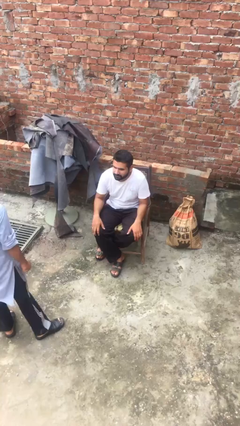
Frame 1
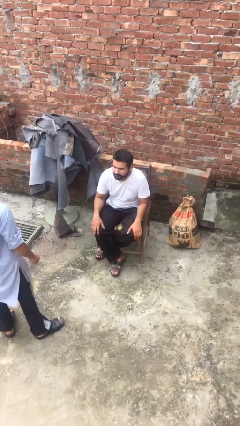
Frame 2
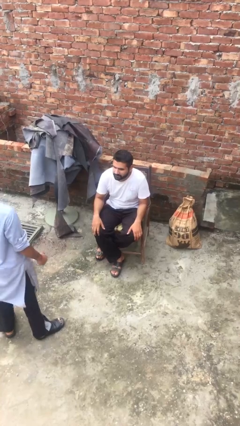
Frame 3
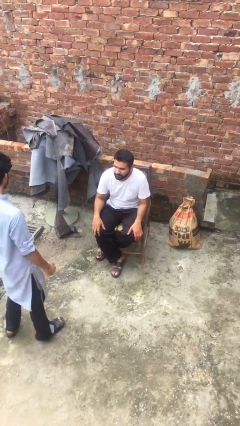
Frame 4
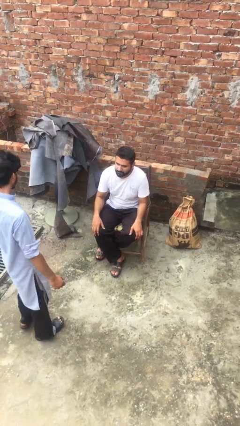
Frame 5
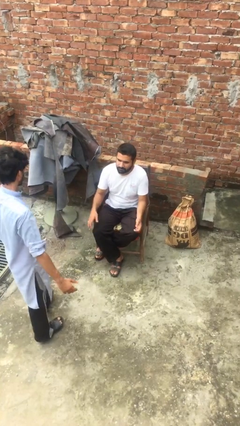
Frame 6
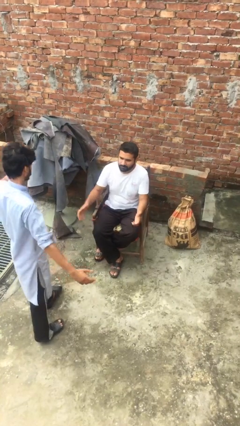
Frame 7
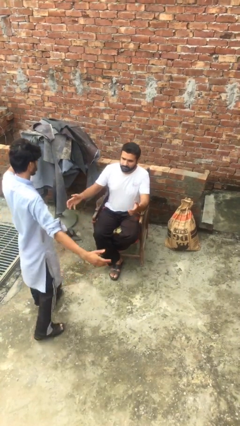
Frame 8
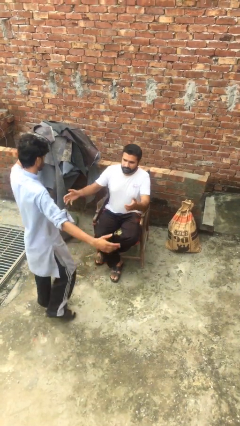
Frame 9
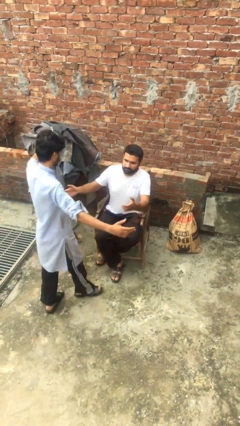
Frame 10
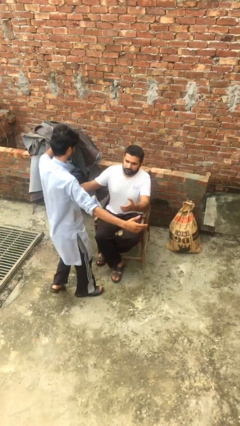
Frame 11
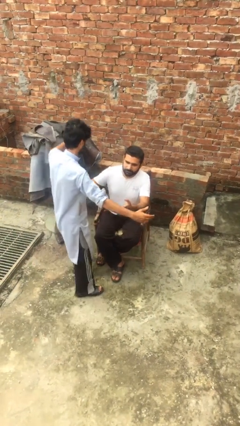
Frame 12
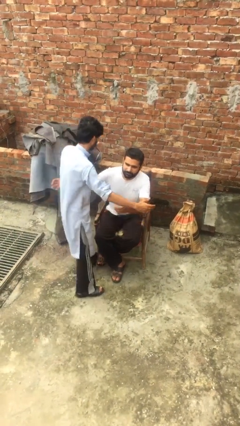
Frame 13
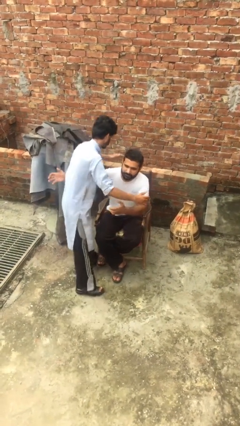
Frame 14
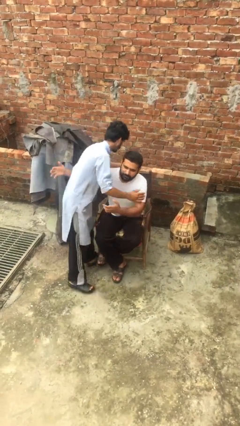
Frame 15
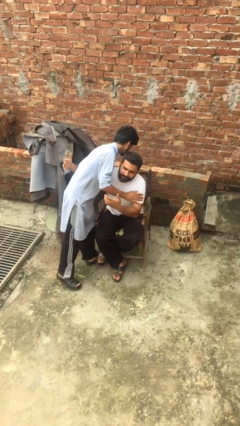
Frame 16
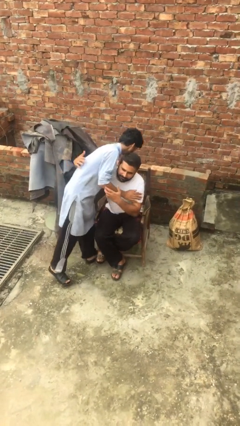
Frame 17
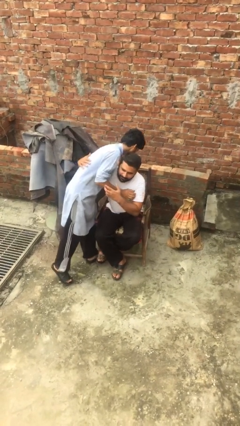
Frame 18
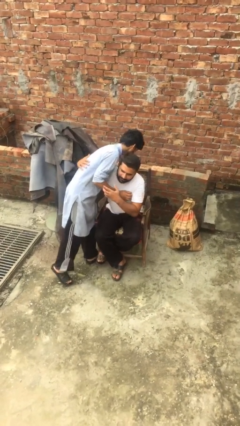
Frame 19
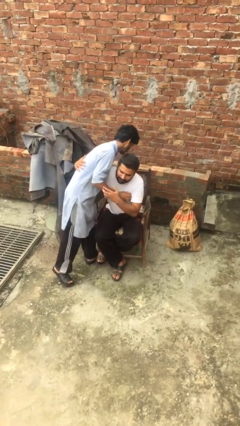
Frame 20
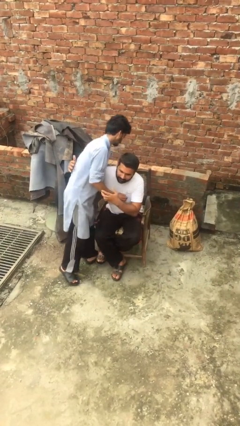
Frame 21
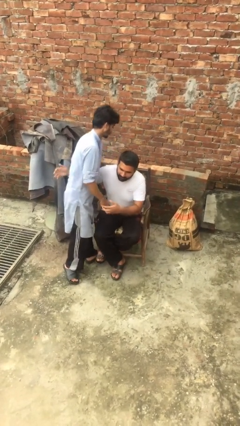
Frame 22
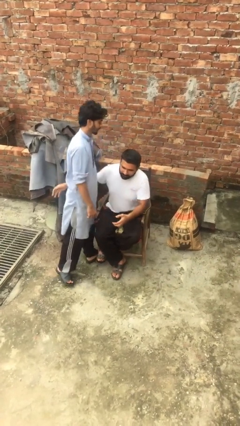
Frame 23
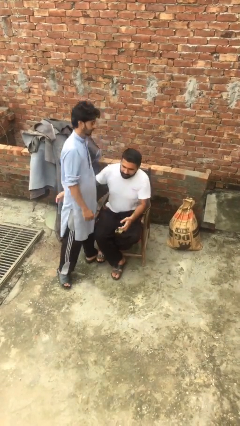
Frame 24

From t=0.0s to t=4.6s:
person embraces person

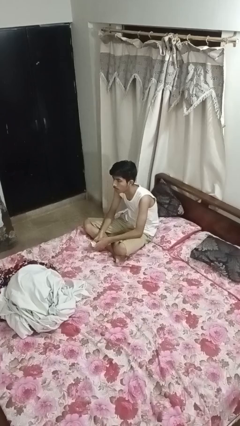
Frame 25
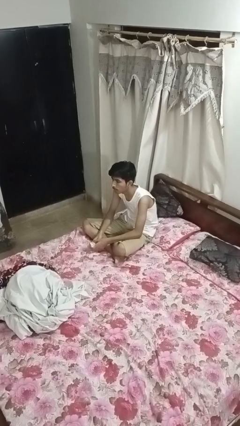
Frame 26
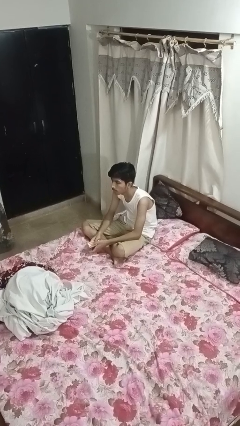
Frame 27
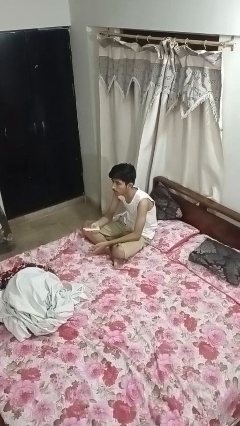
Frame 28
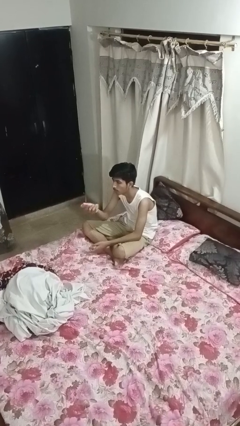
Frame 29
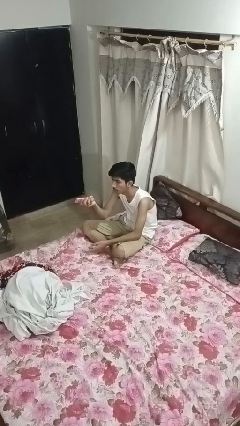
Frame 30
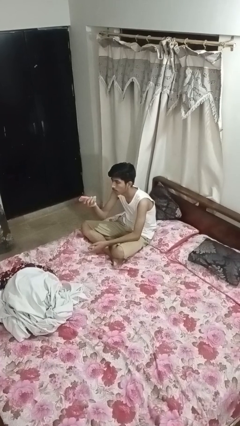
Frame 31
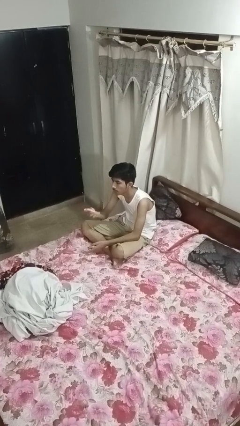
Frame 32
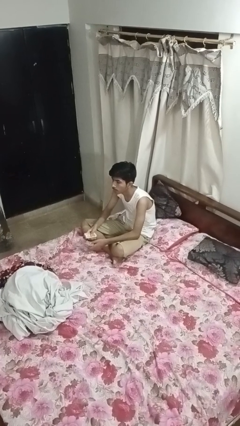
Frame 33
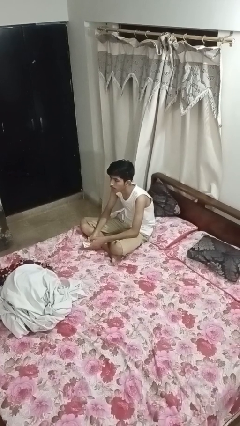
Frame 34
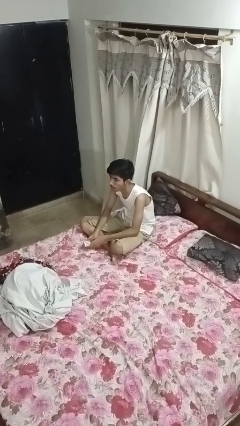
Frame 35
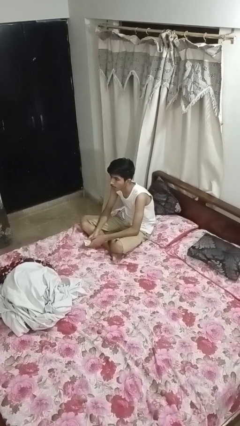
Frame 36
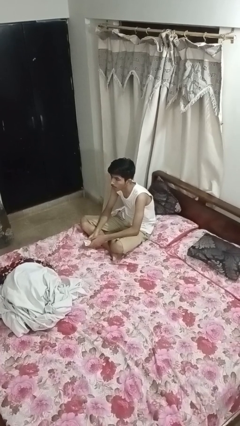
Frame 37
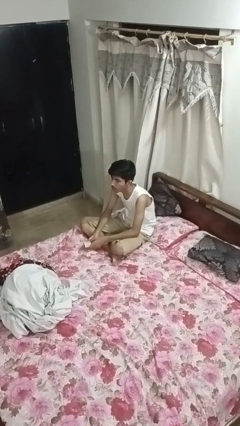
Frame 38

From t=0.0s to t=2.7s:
person uses television remote

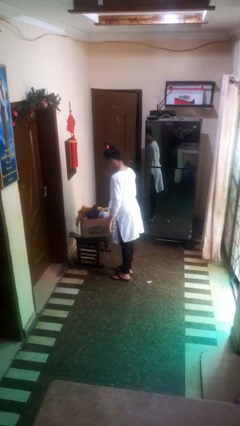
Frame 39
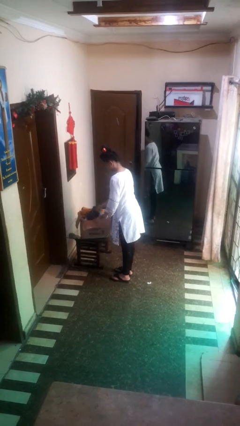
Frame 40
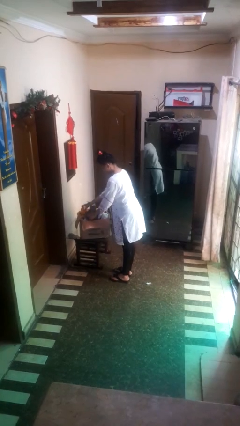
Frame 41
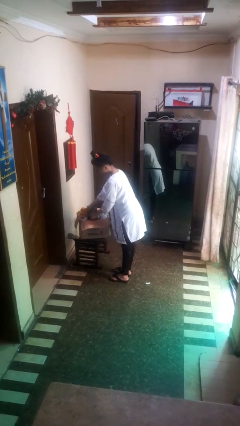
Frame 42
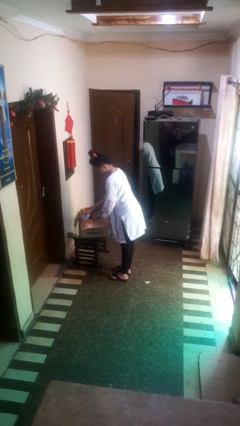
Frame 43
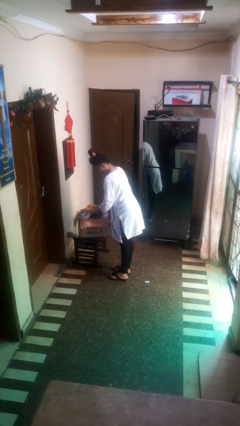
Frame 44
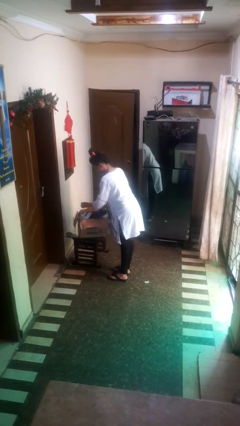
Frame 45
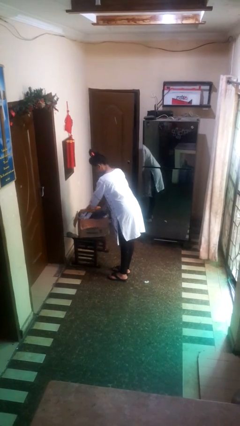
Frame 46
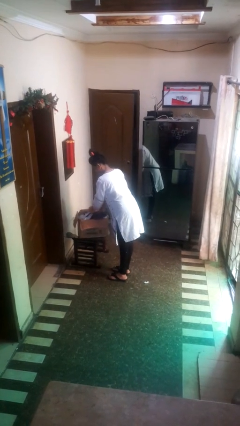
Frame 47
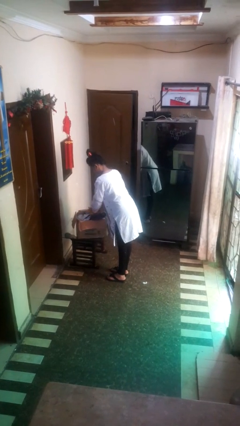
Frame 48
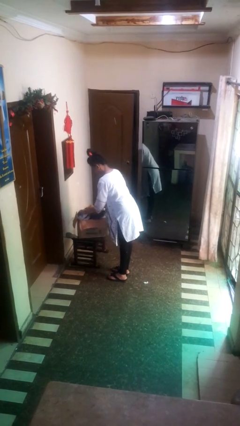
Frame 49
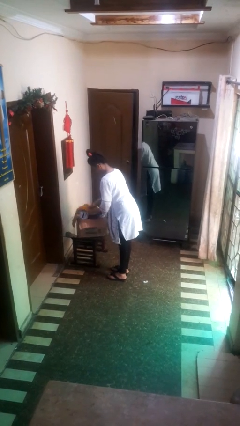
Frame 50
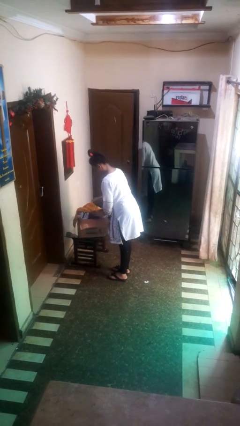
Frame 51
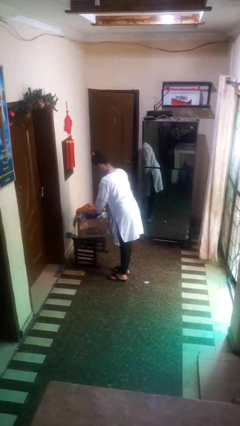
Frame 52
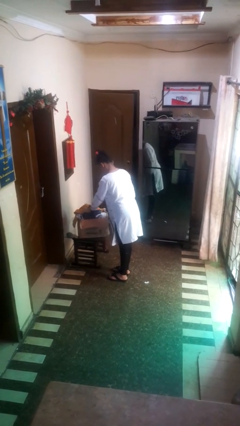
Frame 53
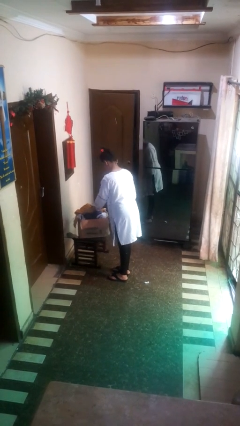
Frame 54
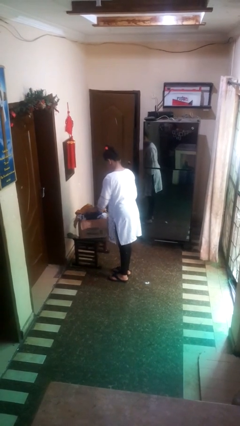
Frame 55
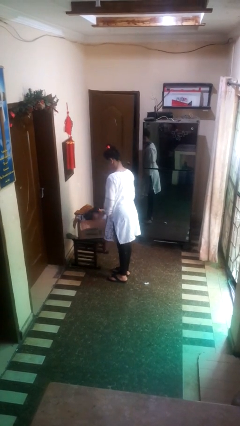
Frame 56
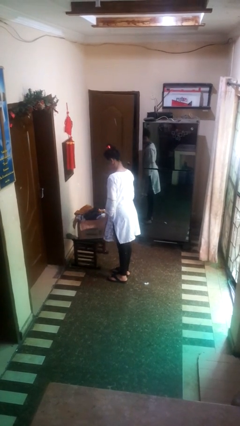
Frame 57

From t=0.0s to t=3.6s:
person searches in box

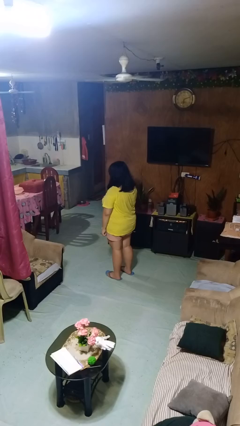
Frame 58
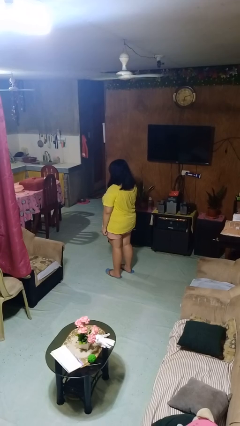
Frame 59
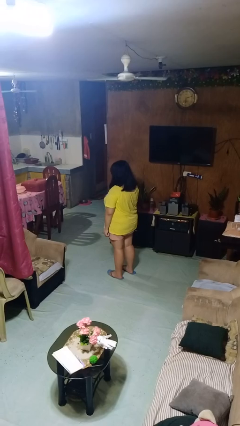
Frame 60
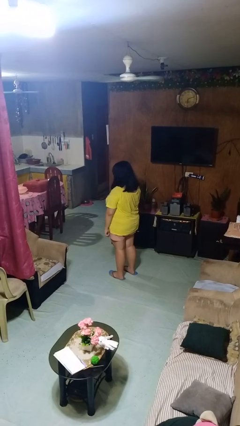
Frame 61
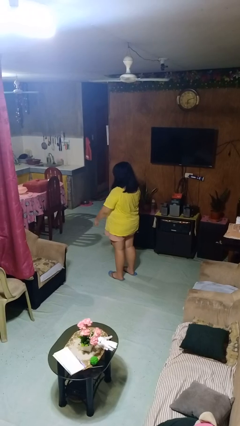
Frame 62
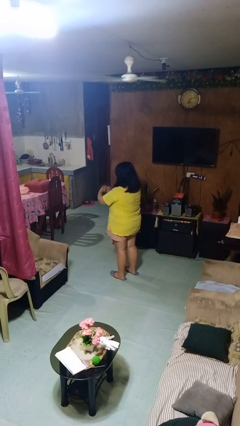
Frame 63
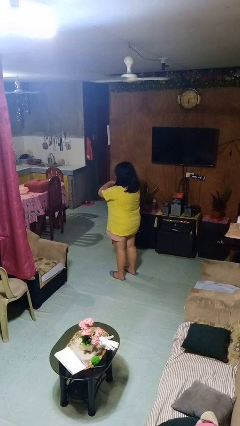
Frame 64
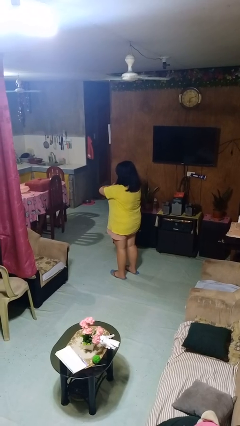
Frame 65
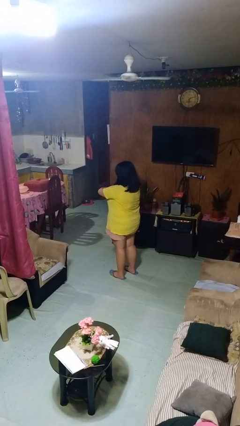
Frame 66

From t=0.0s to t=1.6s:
person crosses arms

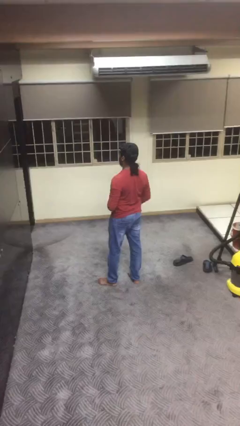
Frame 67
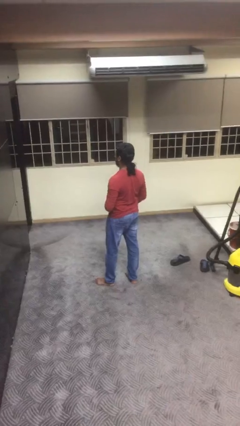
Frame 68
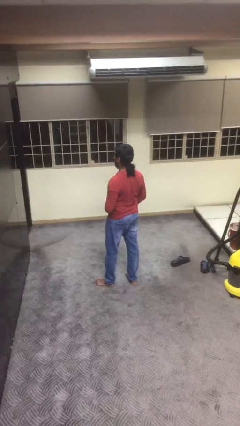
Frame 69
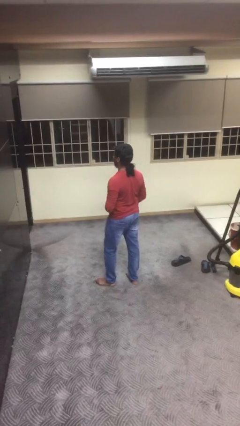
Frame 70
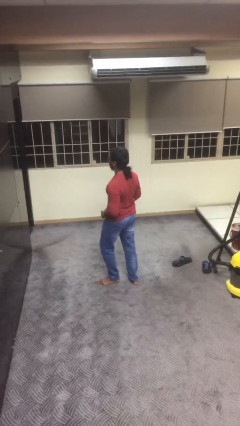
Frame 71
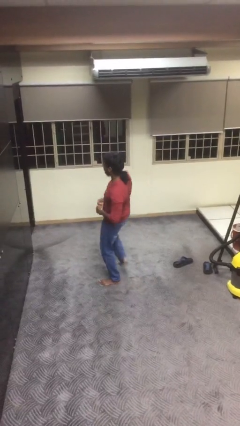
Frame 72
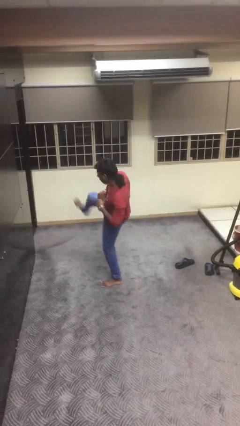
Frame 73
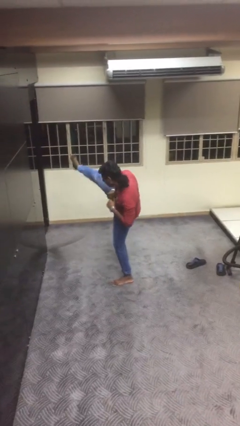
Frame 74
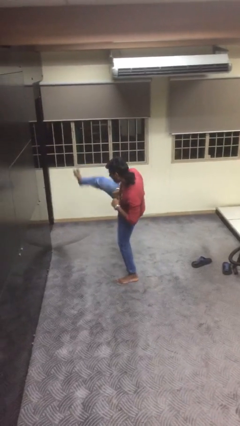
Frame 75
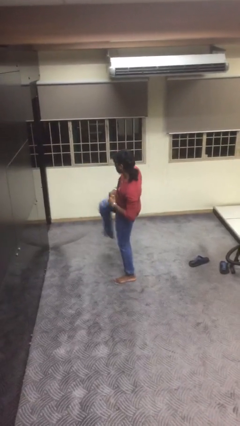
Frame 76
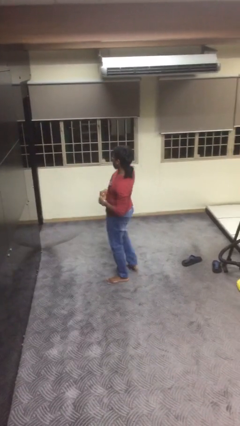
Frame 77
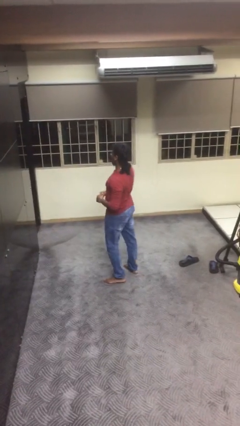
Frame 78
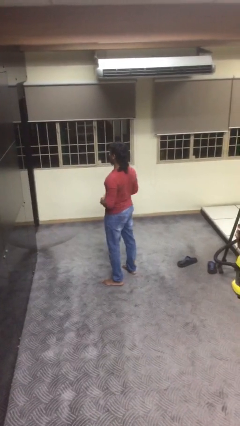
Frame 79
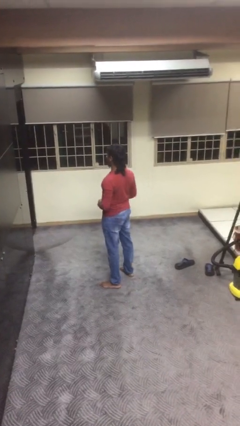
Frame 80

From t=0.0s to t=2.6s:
person karate kicks

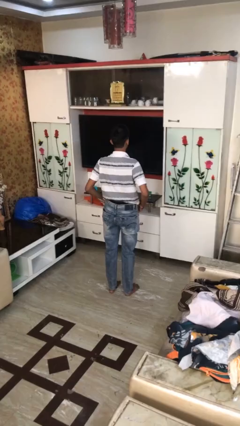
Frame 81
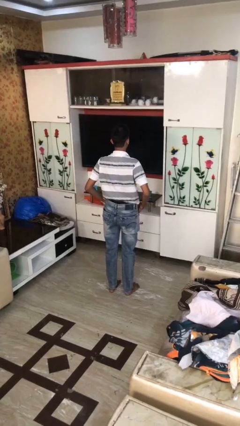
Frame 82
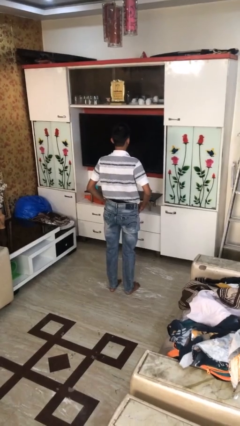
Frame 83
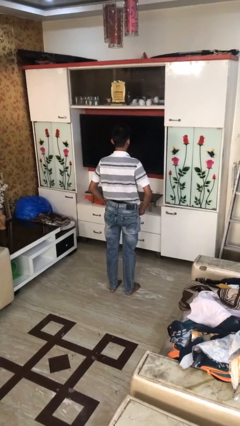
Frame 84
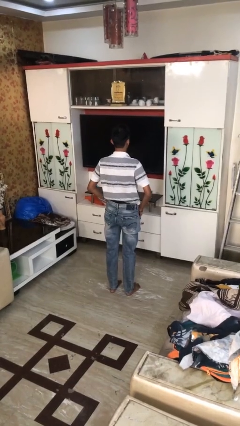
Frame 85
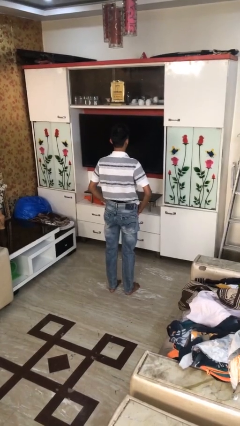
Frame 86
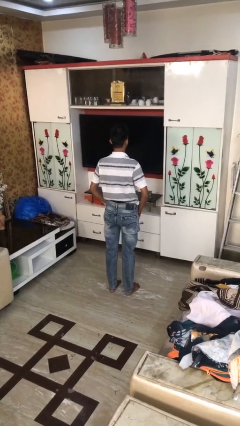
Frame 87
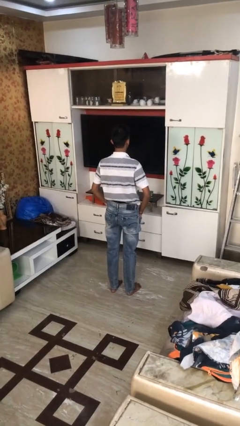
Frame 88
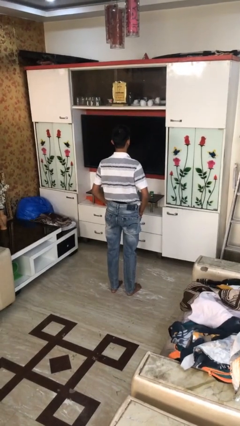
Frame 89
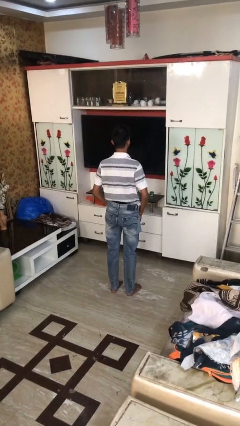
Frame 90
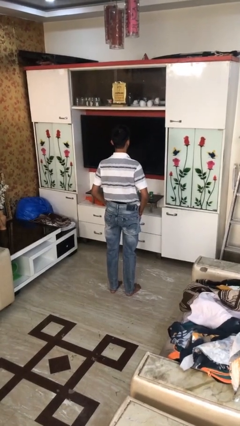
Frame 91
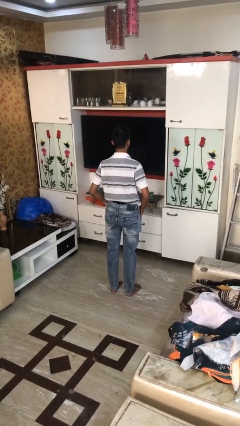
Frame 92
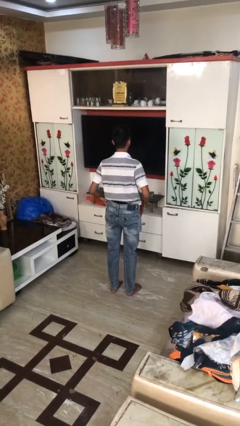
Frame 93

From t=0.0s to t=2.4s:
person puts hands in back pockets
